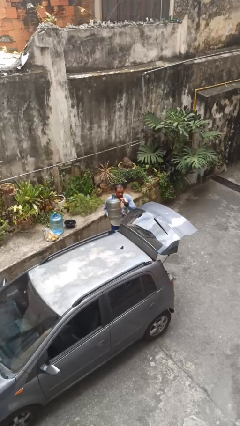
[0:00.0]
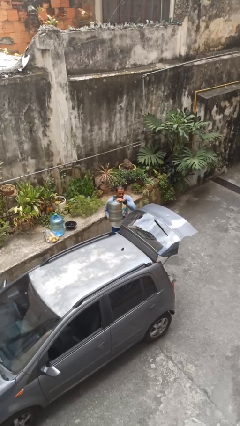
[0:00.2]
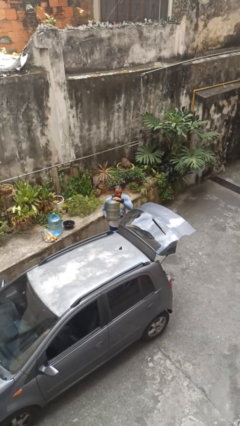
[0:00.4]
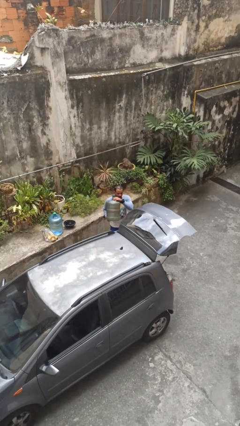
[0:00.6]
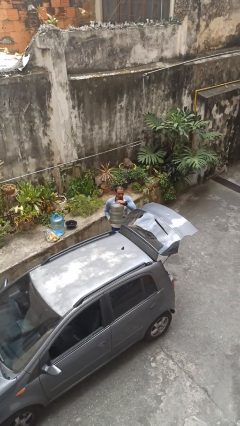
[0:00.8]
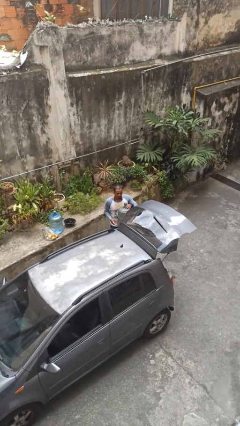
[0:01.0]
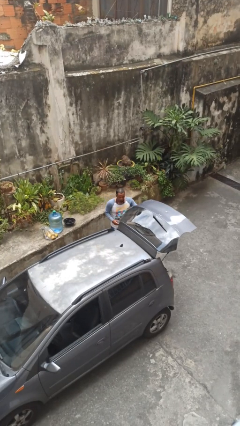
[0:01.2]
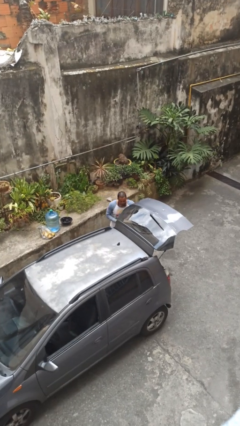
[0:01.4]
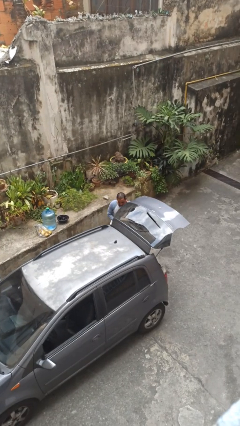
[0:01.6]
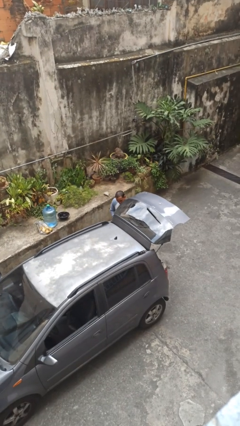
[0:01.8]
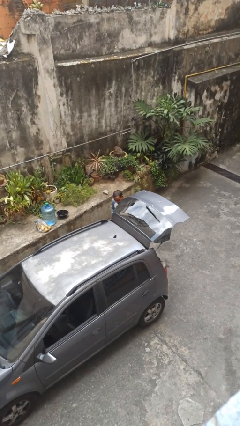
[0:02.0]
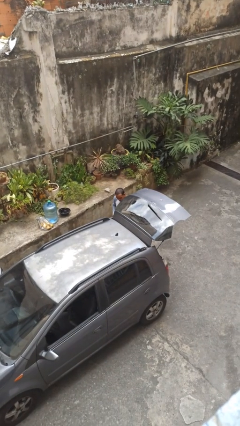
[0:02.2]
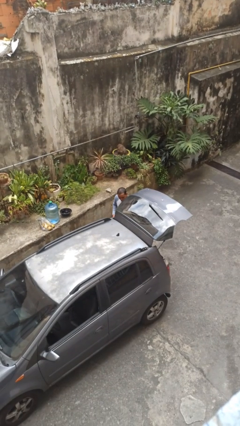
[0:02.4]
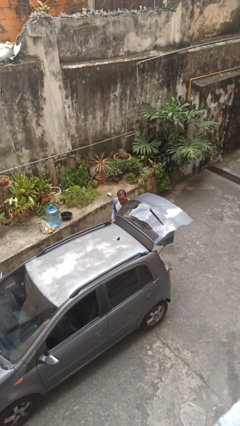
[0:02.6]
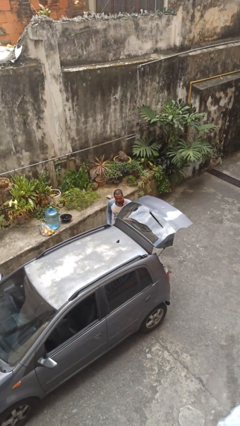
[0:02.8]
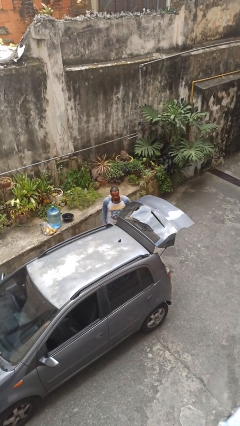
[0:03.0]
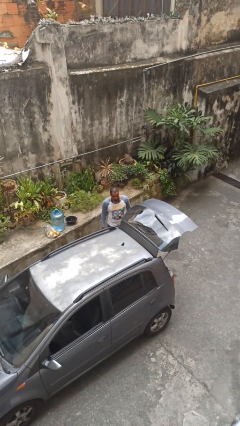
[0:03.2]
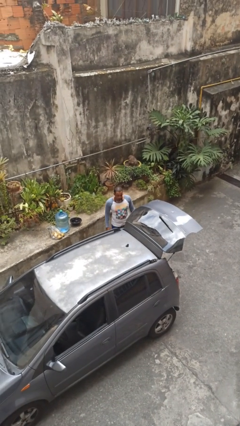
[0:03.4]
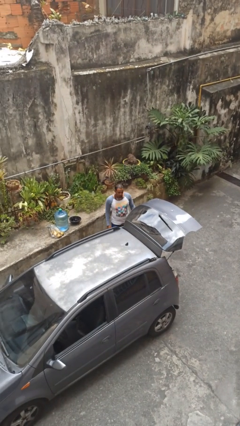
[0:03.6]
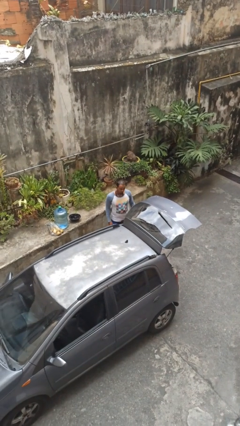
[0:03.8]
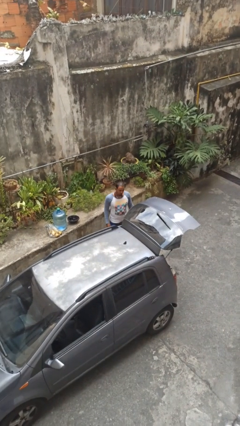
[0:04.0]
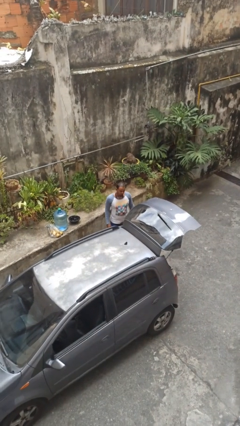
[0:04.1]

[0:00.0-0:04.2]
person loads car

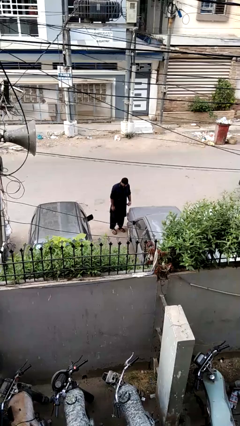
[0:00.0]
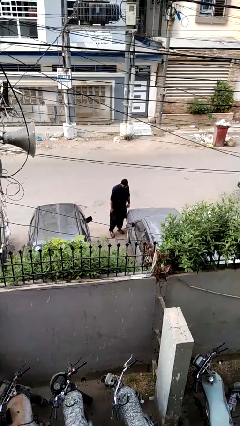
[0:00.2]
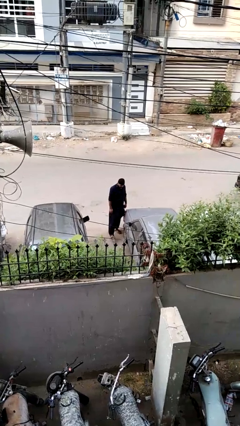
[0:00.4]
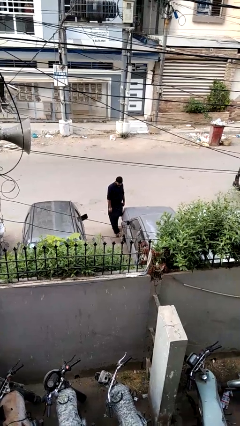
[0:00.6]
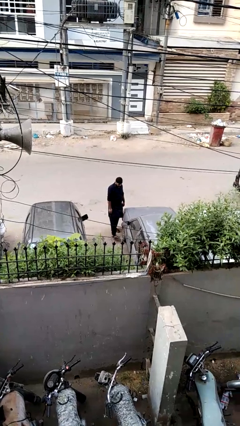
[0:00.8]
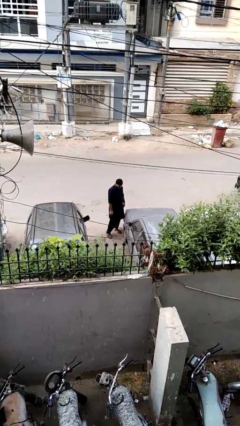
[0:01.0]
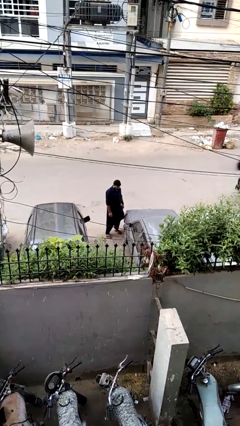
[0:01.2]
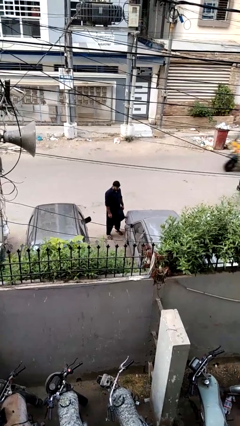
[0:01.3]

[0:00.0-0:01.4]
person kicks car tires

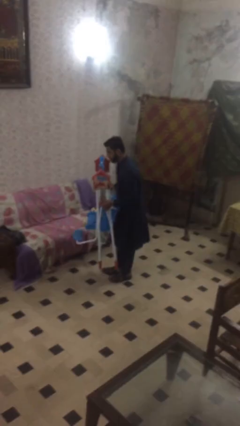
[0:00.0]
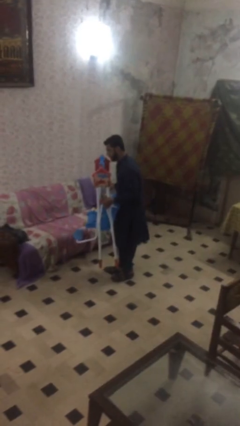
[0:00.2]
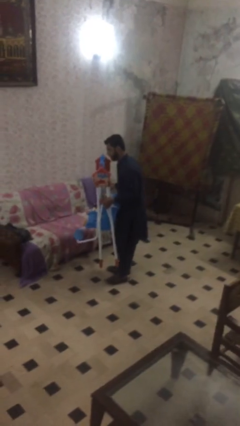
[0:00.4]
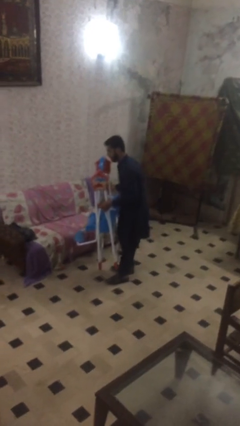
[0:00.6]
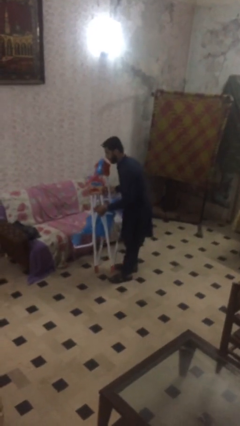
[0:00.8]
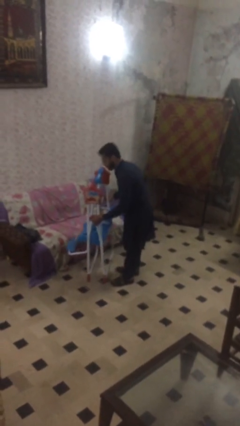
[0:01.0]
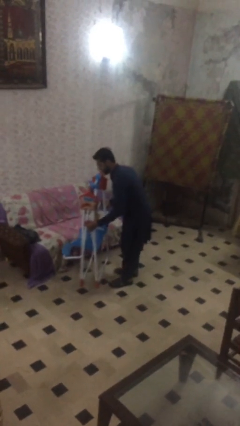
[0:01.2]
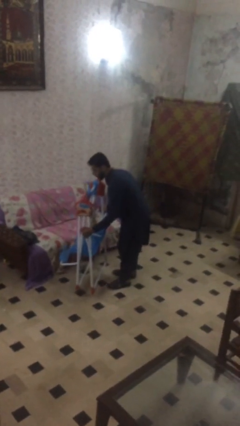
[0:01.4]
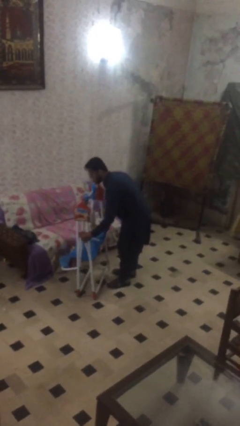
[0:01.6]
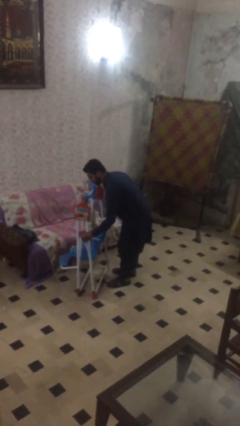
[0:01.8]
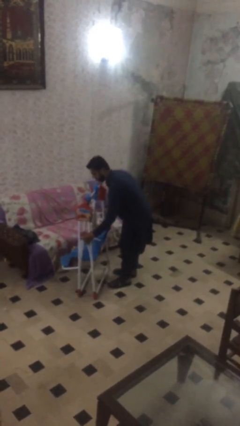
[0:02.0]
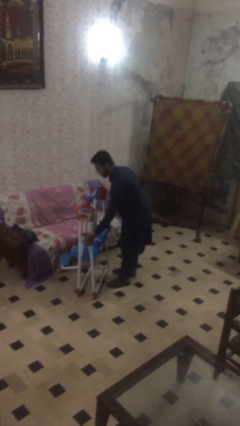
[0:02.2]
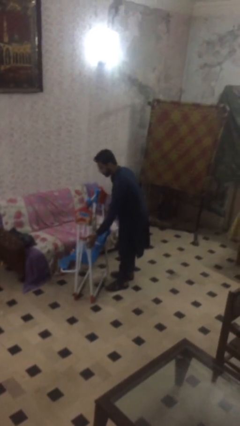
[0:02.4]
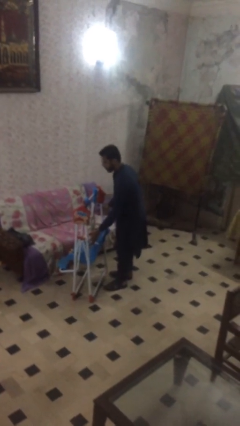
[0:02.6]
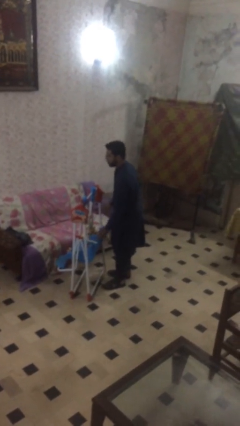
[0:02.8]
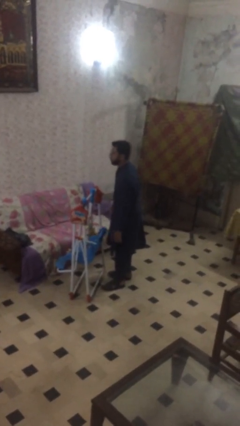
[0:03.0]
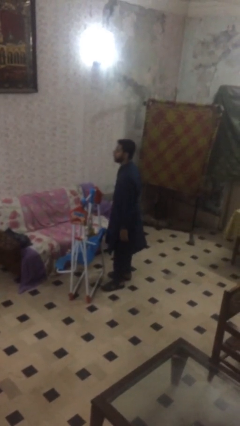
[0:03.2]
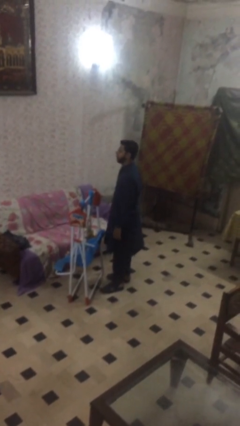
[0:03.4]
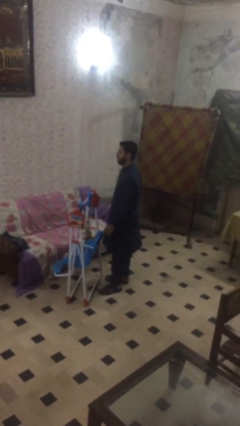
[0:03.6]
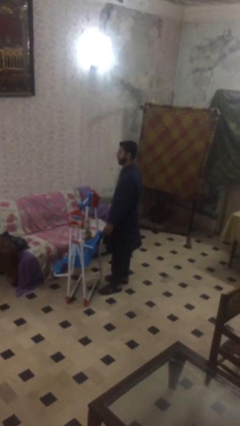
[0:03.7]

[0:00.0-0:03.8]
person puts down object on floor

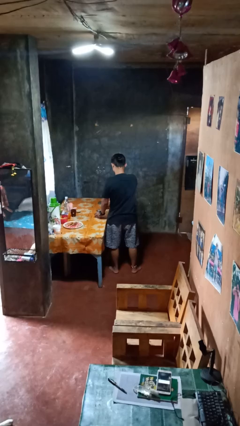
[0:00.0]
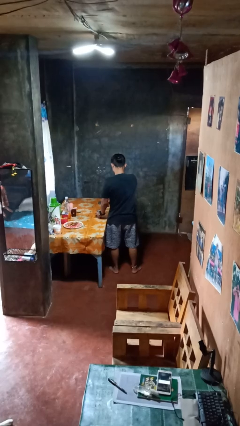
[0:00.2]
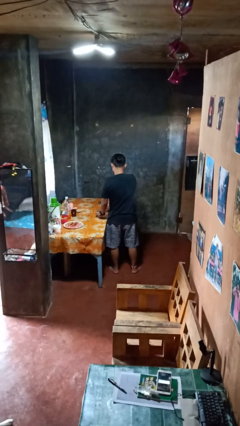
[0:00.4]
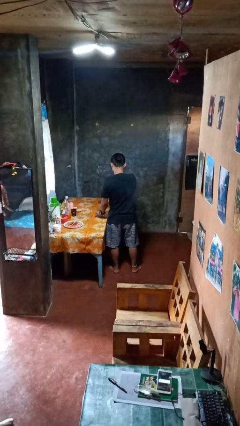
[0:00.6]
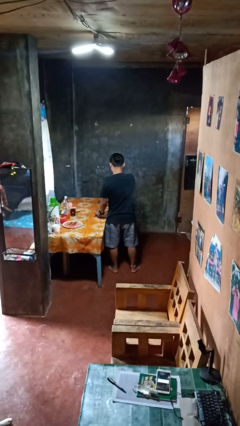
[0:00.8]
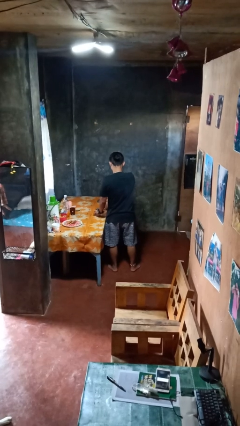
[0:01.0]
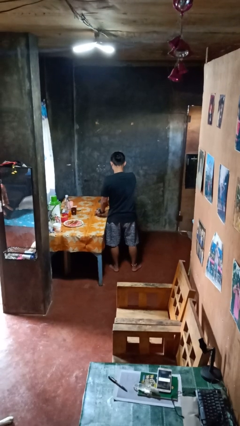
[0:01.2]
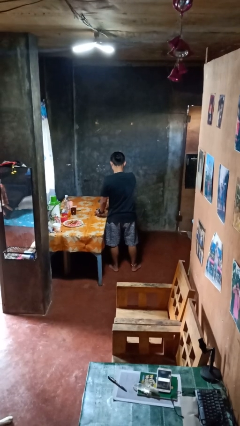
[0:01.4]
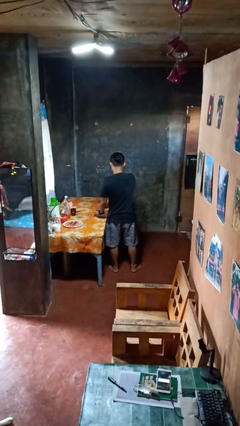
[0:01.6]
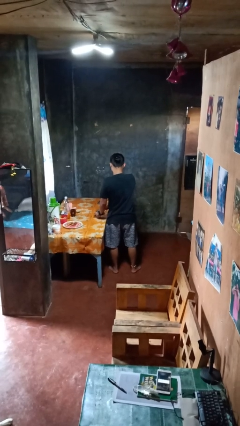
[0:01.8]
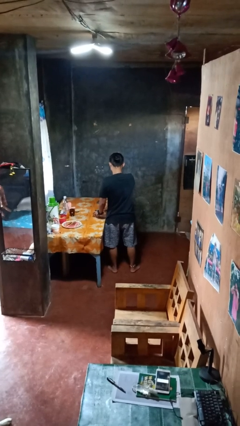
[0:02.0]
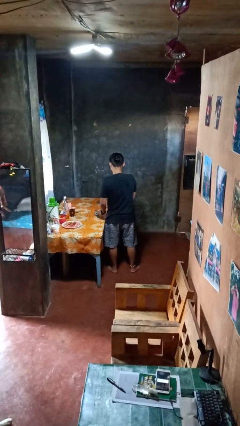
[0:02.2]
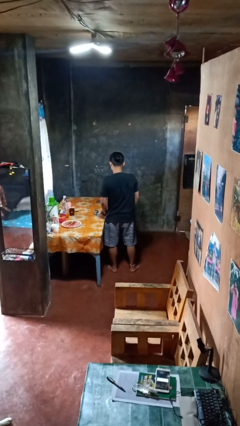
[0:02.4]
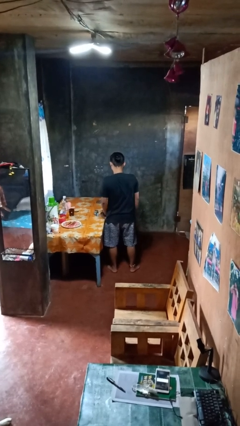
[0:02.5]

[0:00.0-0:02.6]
person opens can with can opener

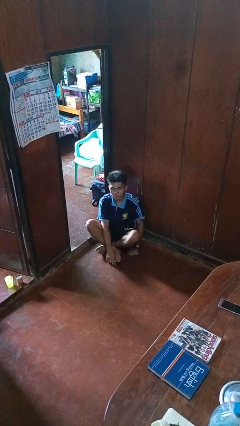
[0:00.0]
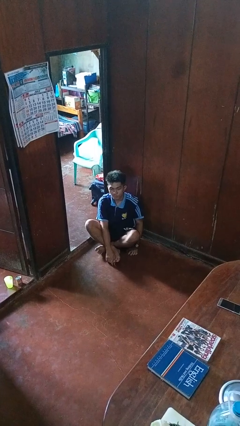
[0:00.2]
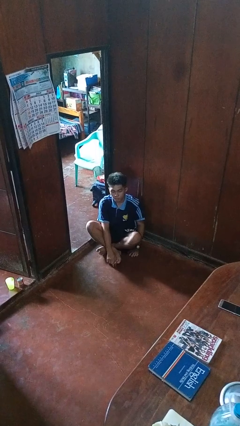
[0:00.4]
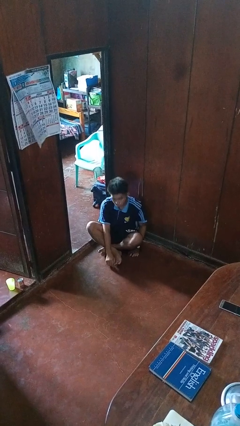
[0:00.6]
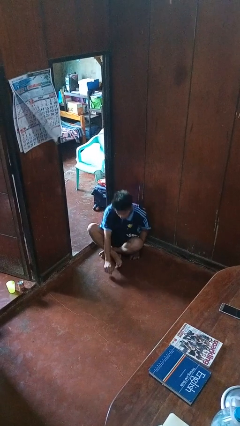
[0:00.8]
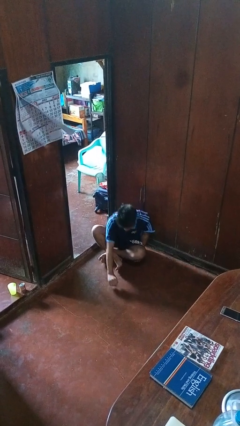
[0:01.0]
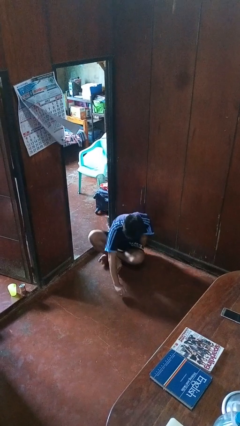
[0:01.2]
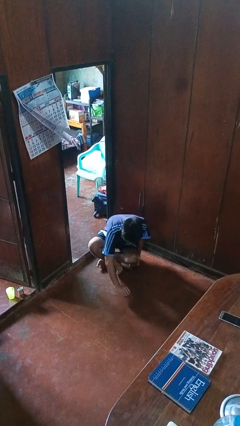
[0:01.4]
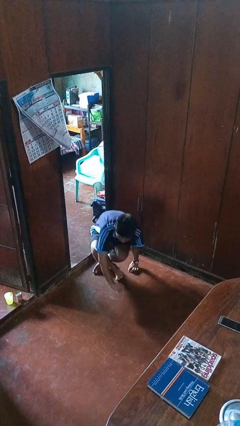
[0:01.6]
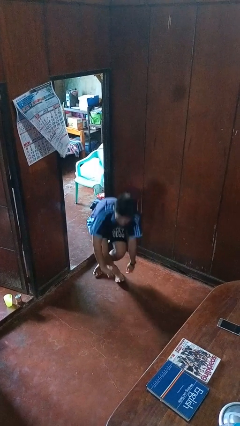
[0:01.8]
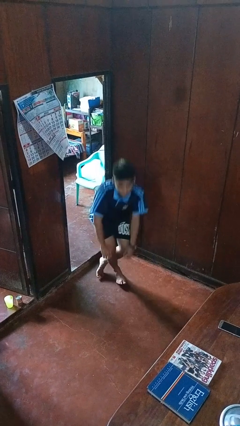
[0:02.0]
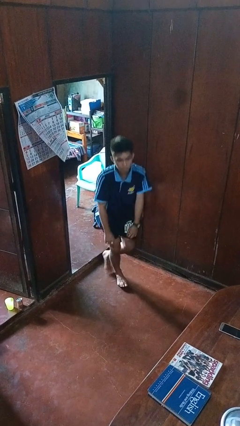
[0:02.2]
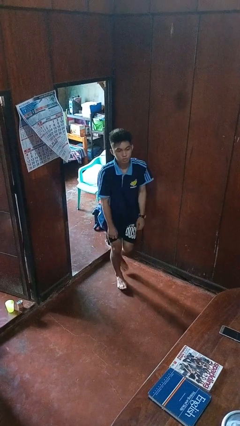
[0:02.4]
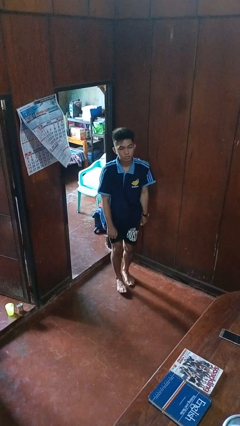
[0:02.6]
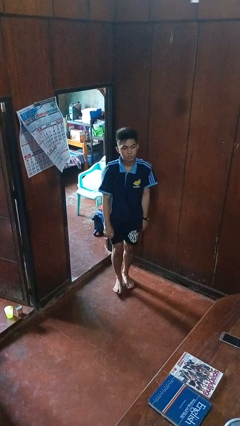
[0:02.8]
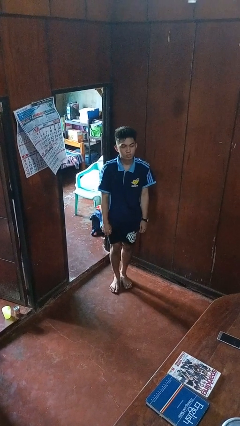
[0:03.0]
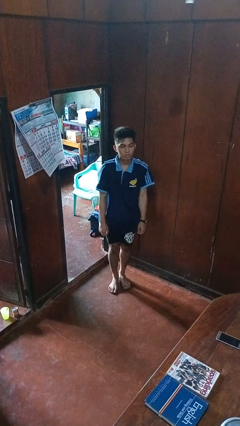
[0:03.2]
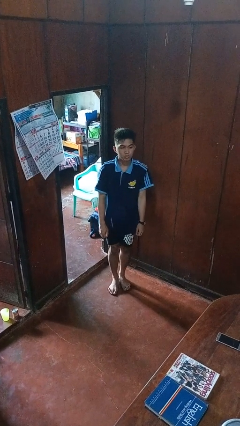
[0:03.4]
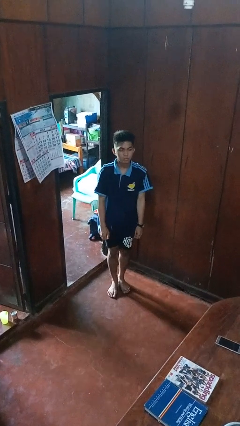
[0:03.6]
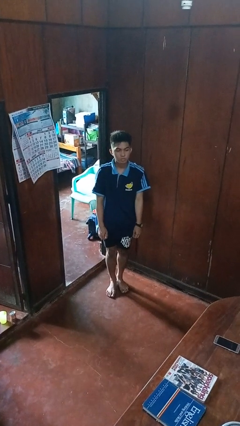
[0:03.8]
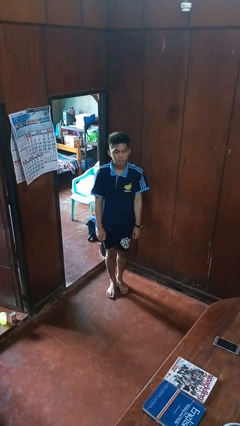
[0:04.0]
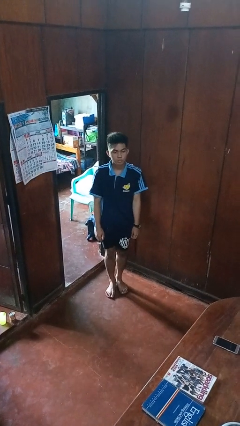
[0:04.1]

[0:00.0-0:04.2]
person stands up from floor

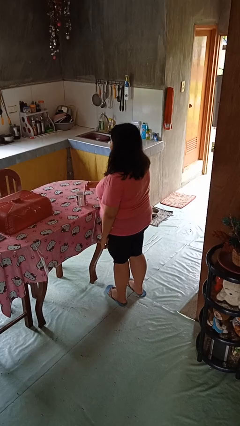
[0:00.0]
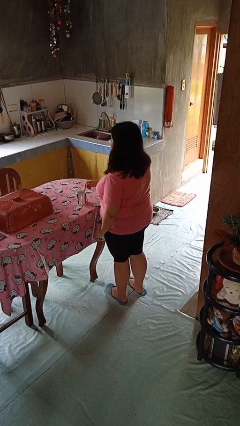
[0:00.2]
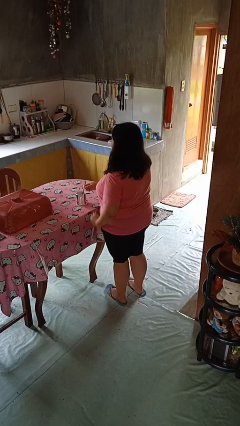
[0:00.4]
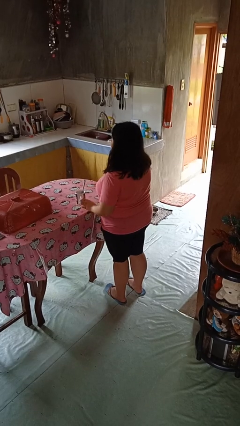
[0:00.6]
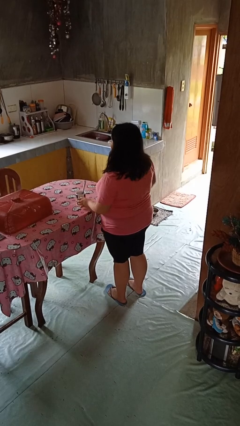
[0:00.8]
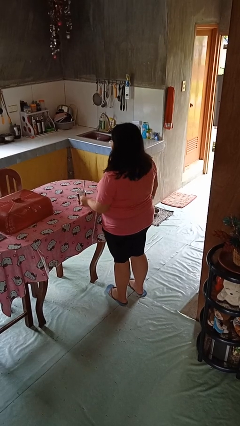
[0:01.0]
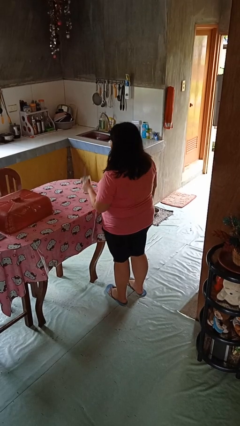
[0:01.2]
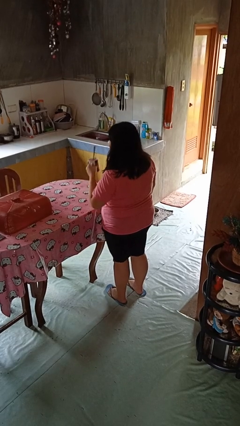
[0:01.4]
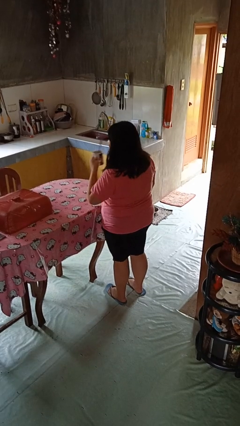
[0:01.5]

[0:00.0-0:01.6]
person stirs mug

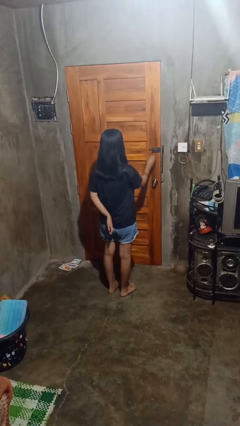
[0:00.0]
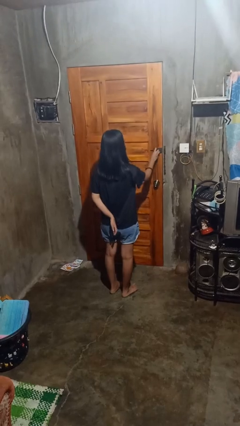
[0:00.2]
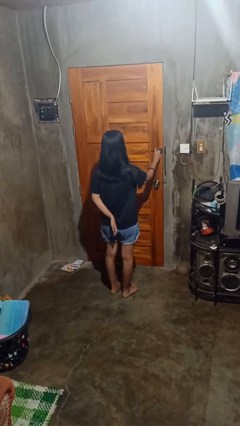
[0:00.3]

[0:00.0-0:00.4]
person locks door with keys
